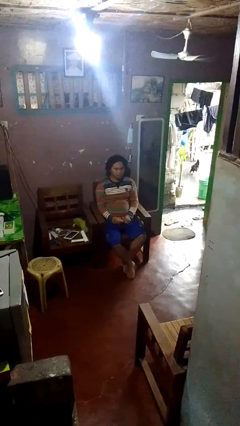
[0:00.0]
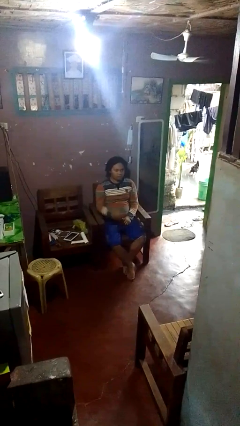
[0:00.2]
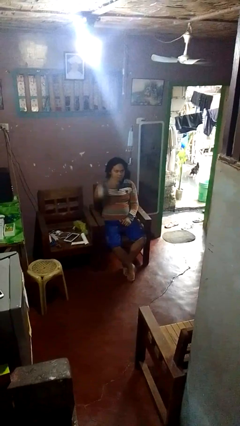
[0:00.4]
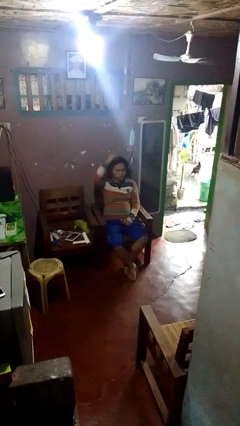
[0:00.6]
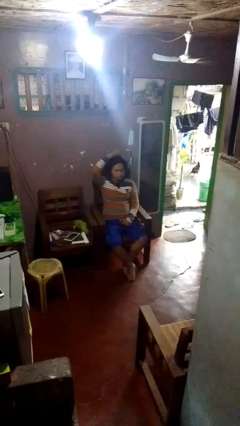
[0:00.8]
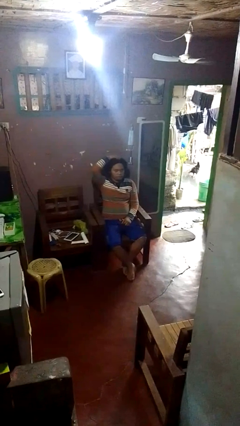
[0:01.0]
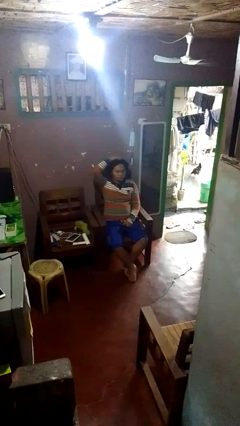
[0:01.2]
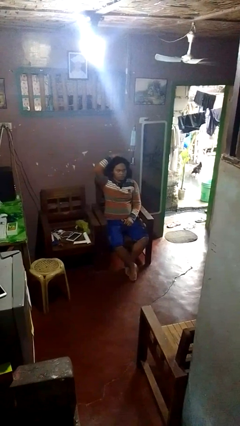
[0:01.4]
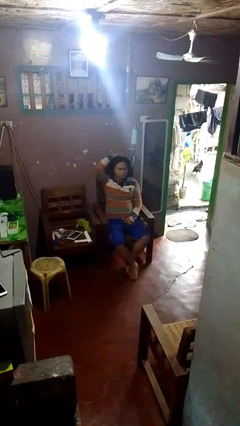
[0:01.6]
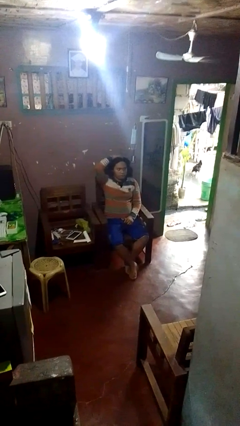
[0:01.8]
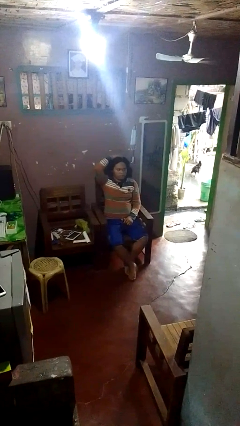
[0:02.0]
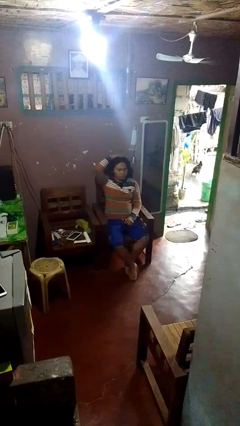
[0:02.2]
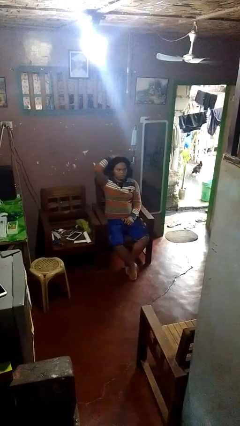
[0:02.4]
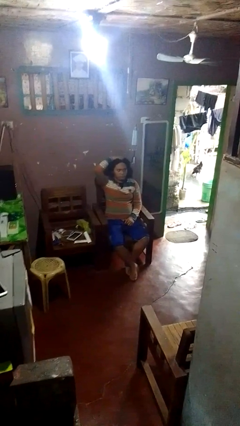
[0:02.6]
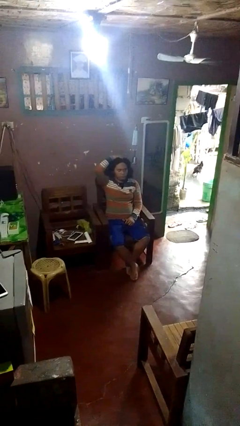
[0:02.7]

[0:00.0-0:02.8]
person pats head

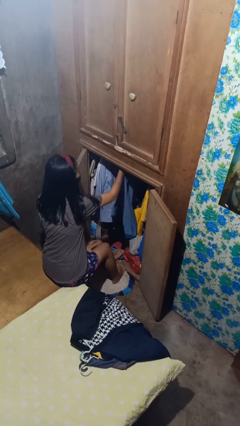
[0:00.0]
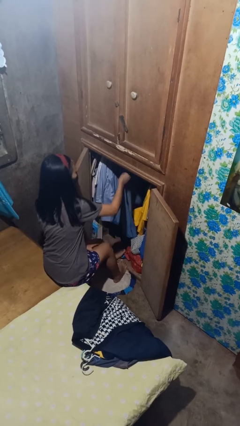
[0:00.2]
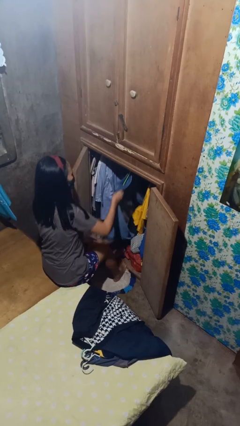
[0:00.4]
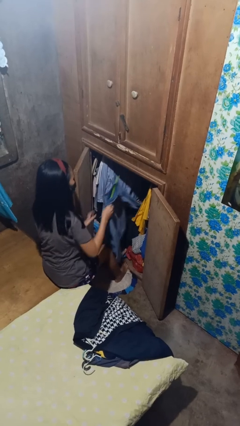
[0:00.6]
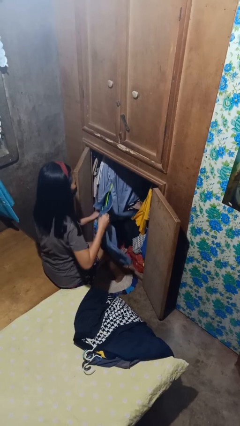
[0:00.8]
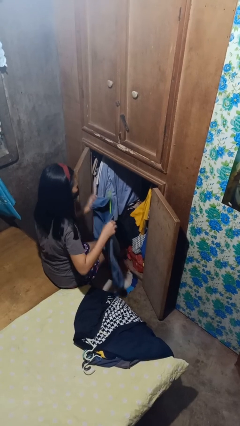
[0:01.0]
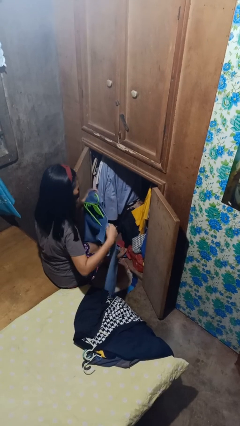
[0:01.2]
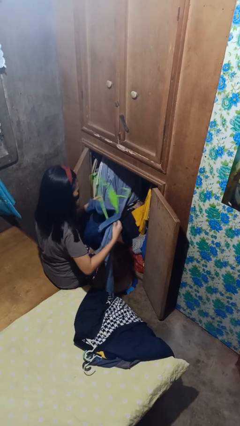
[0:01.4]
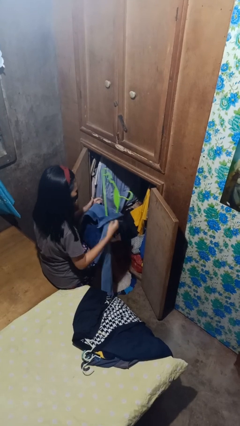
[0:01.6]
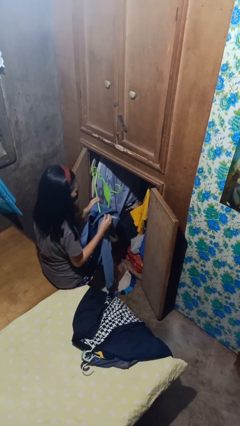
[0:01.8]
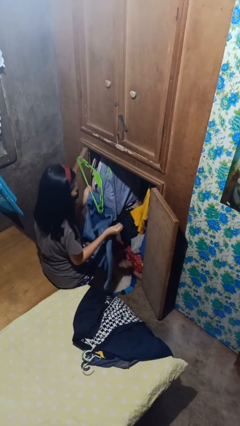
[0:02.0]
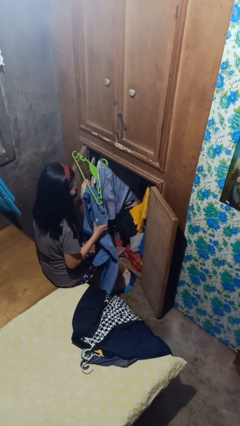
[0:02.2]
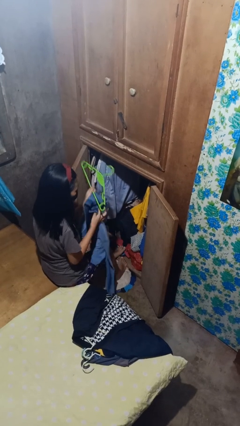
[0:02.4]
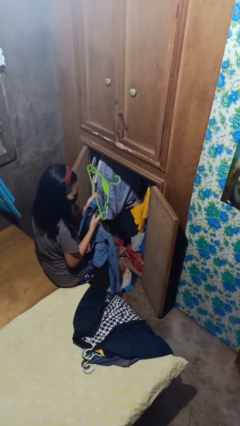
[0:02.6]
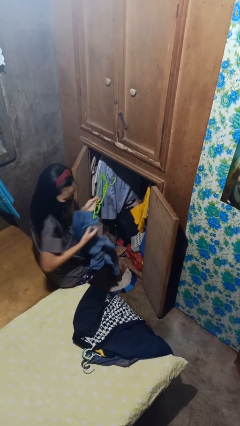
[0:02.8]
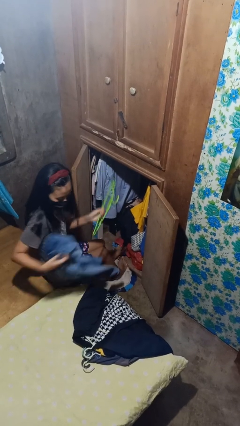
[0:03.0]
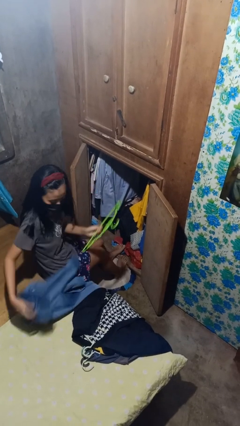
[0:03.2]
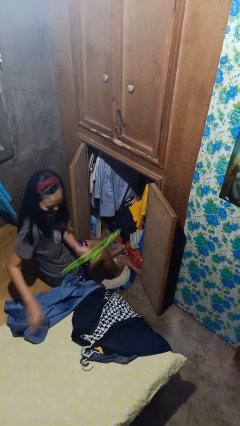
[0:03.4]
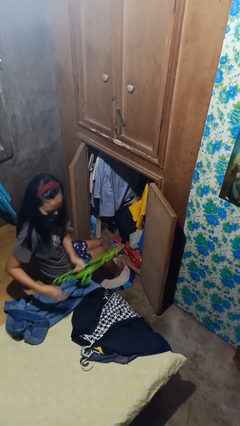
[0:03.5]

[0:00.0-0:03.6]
person takes clothes from closet

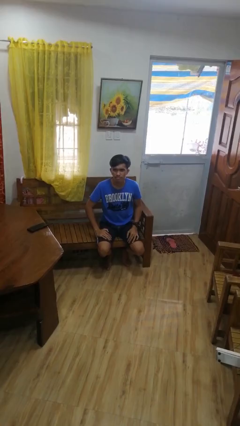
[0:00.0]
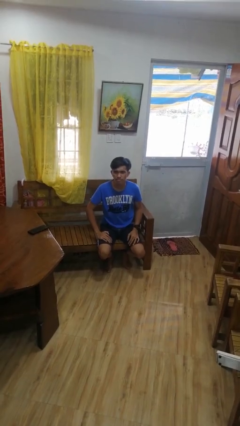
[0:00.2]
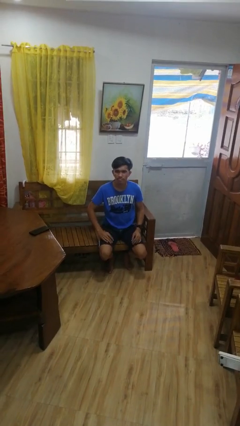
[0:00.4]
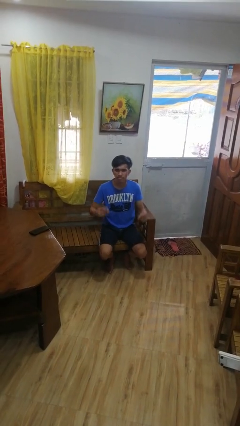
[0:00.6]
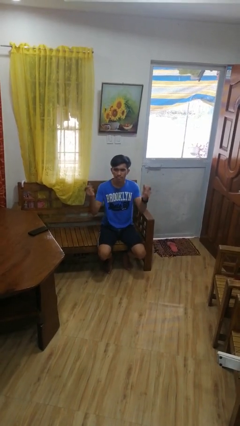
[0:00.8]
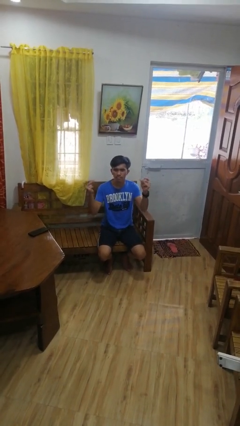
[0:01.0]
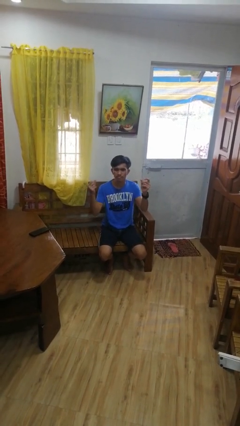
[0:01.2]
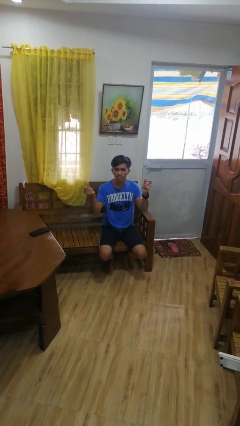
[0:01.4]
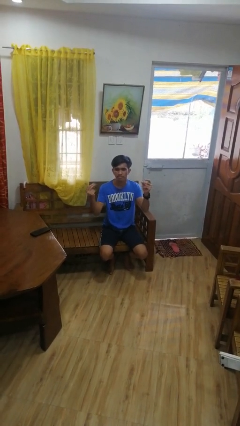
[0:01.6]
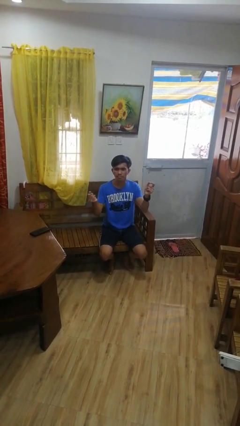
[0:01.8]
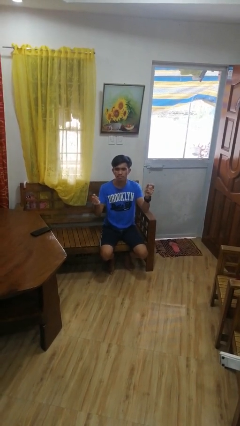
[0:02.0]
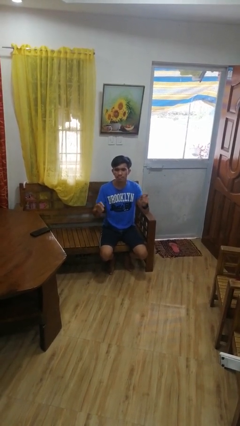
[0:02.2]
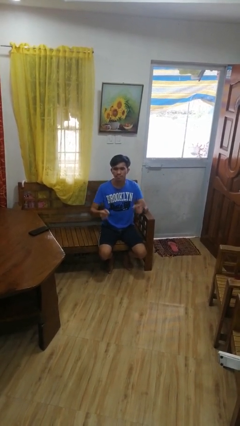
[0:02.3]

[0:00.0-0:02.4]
person snaps fingers

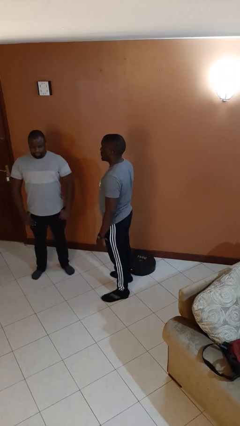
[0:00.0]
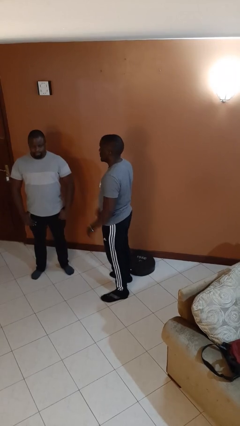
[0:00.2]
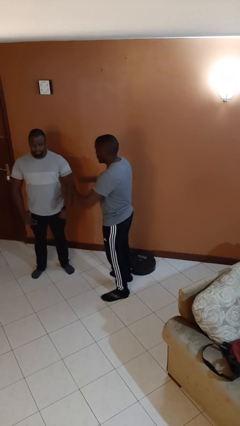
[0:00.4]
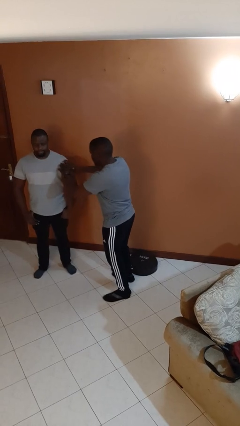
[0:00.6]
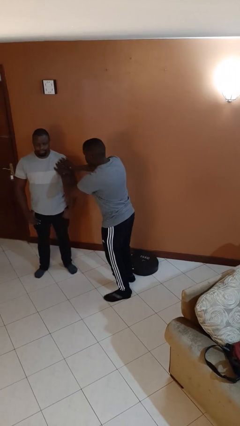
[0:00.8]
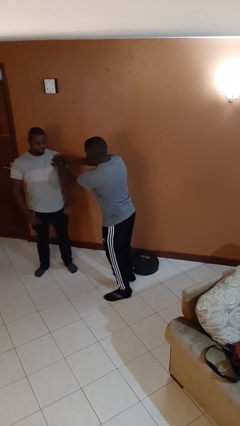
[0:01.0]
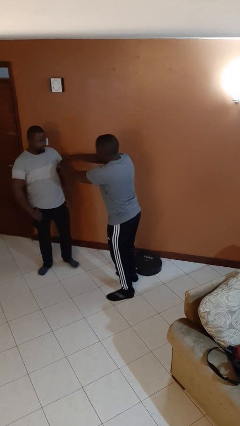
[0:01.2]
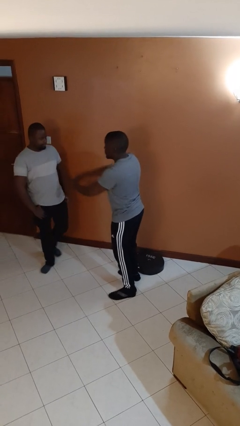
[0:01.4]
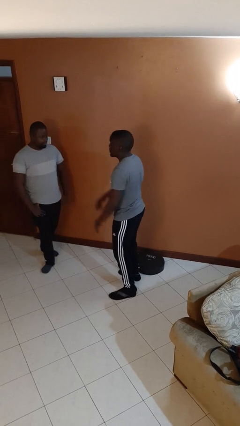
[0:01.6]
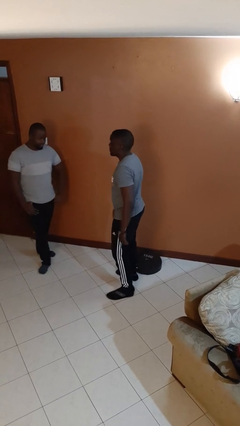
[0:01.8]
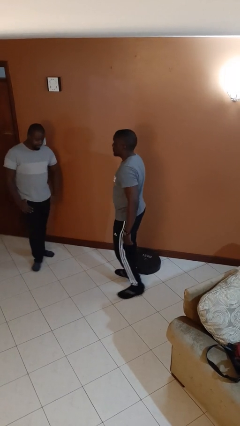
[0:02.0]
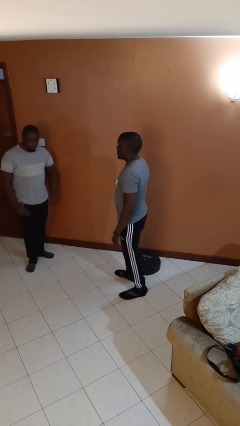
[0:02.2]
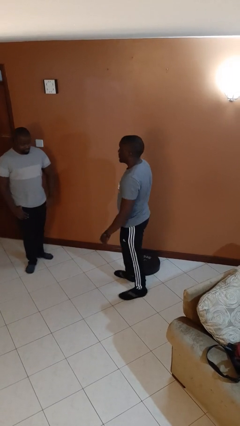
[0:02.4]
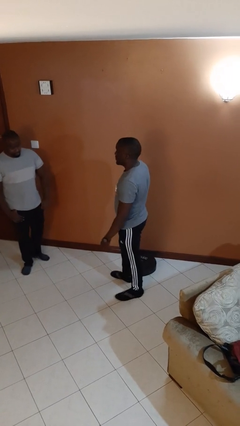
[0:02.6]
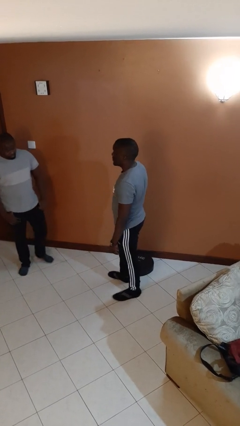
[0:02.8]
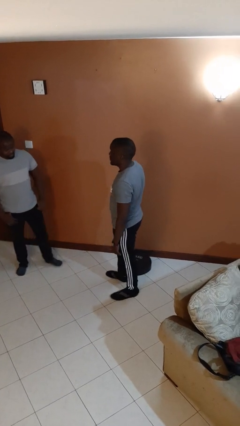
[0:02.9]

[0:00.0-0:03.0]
person shoves person

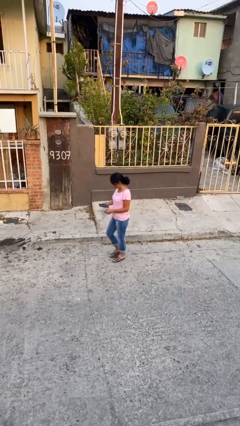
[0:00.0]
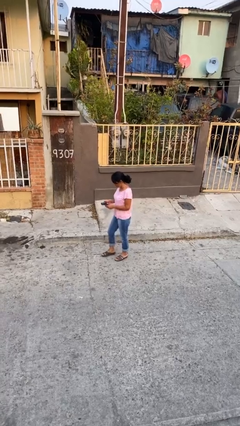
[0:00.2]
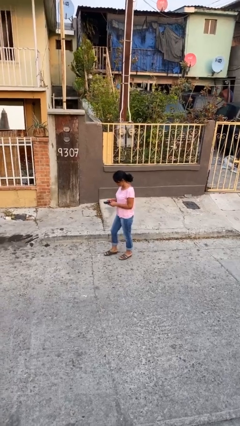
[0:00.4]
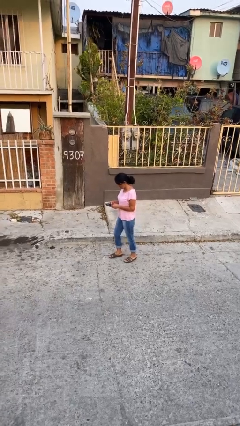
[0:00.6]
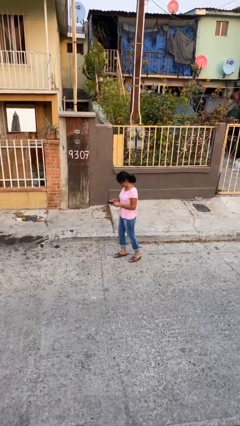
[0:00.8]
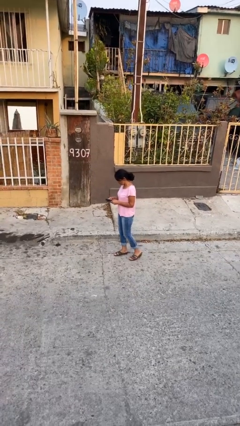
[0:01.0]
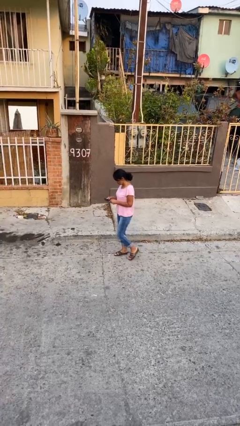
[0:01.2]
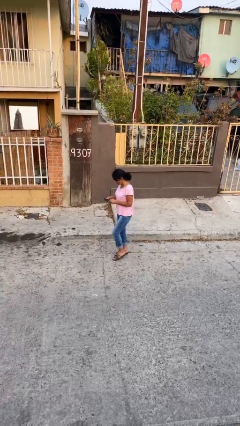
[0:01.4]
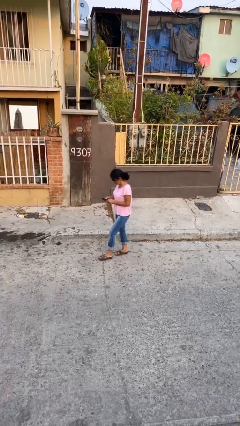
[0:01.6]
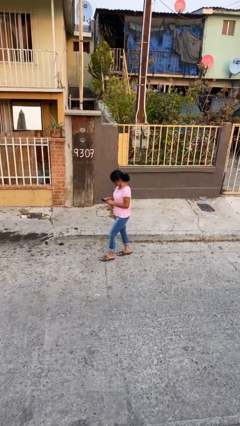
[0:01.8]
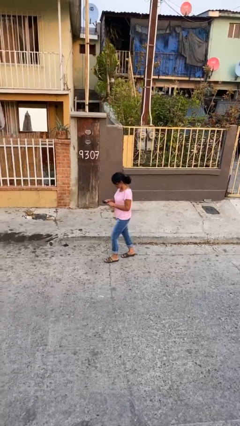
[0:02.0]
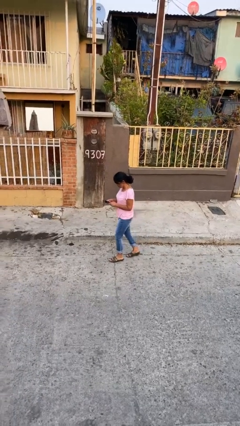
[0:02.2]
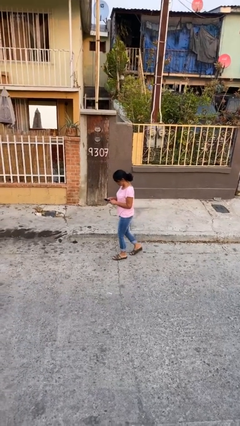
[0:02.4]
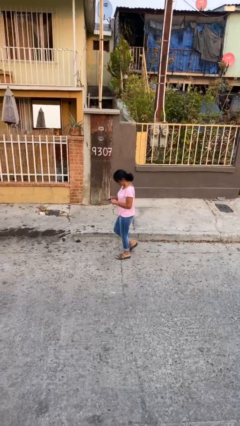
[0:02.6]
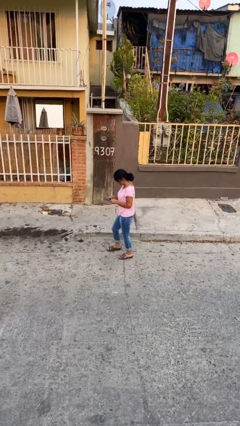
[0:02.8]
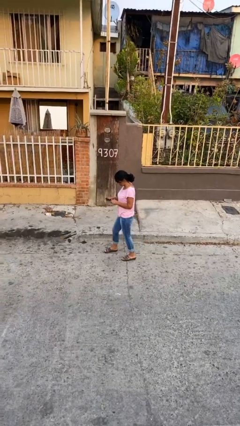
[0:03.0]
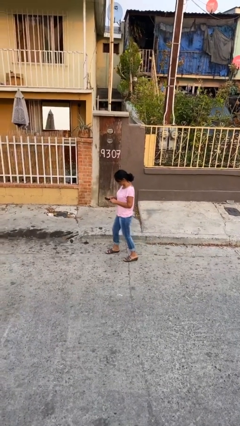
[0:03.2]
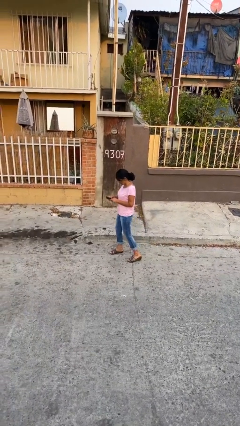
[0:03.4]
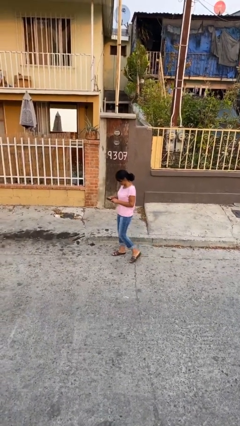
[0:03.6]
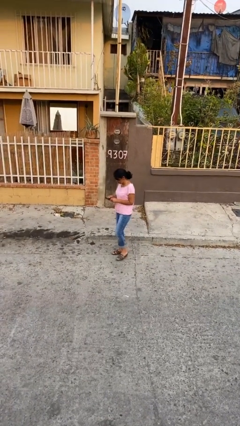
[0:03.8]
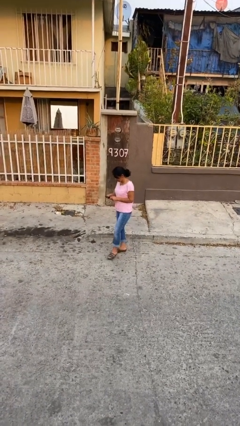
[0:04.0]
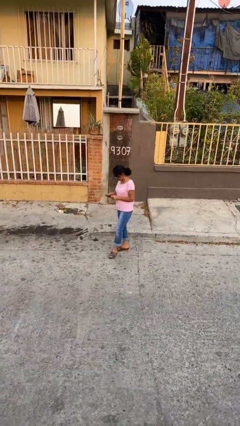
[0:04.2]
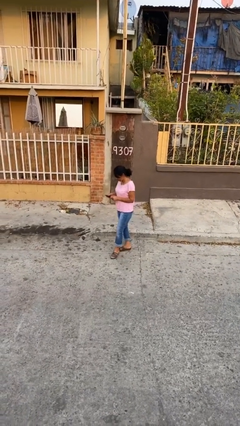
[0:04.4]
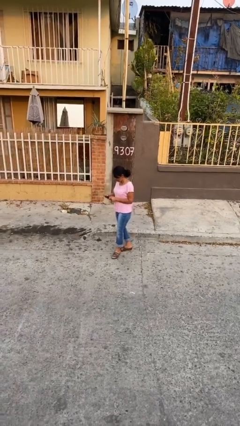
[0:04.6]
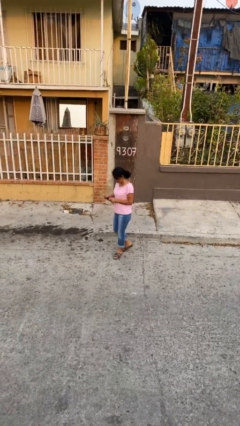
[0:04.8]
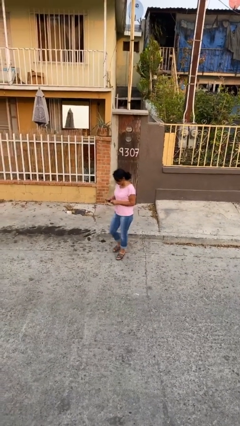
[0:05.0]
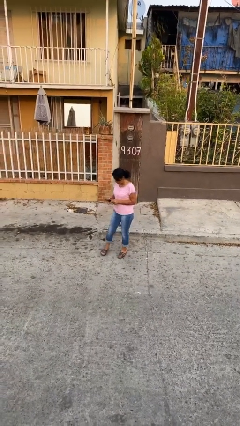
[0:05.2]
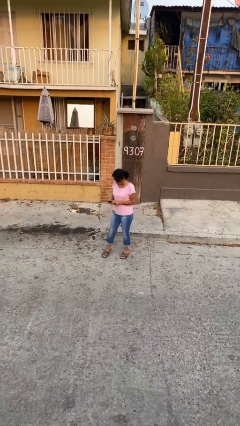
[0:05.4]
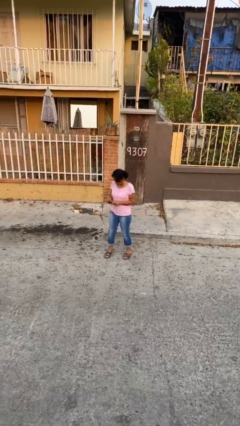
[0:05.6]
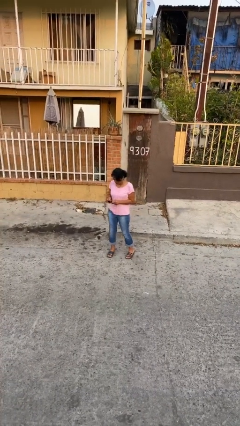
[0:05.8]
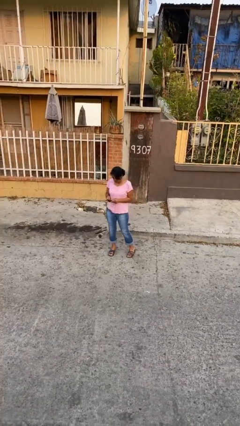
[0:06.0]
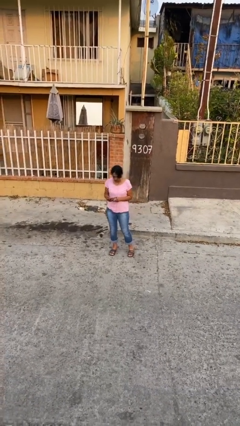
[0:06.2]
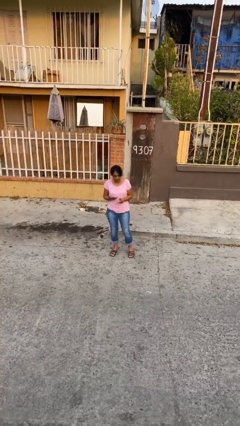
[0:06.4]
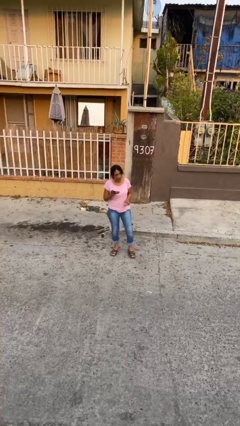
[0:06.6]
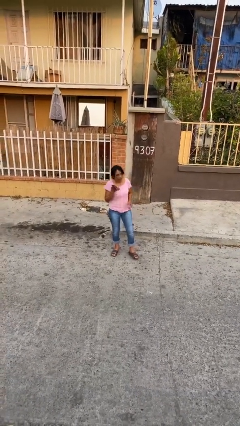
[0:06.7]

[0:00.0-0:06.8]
person texts on phone
